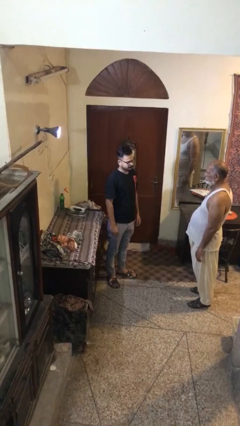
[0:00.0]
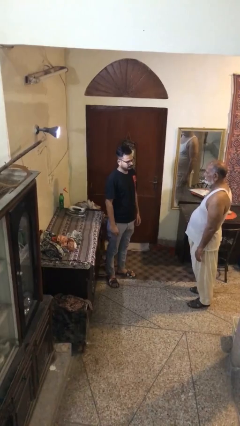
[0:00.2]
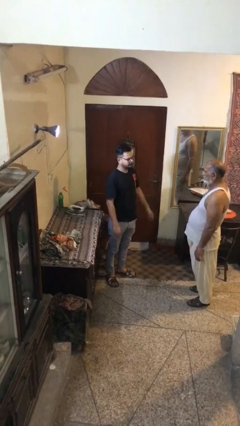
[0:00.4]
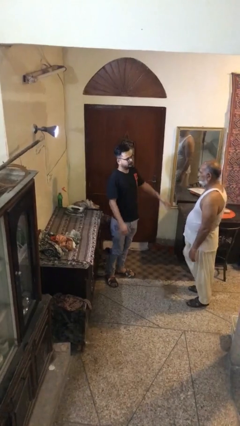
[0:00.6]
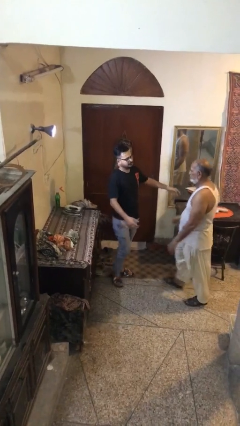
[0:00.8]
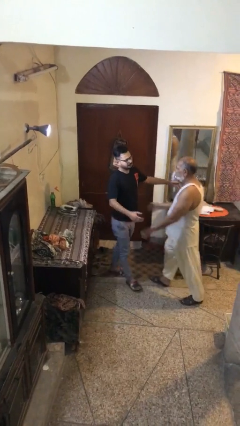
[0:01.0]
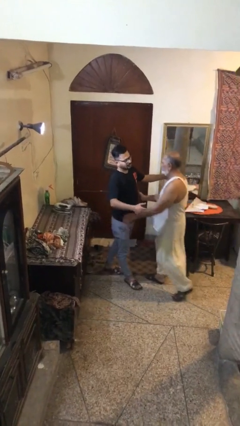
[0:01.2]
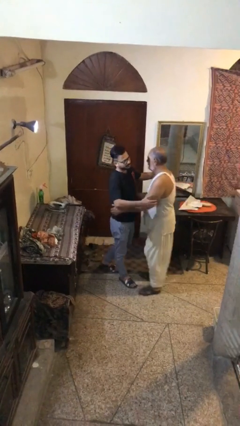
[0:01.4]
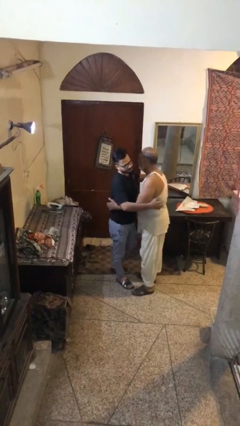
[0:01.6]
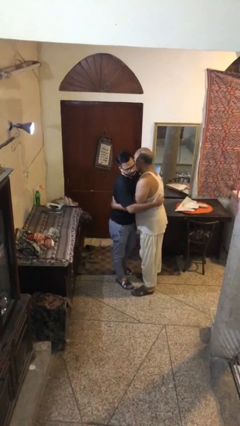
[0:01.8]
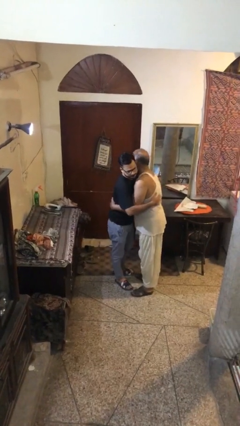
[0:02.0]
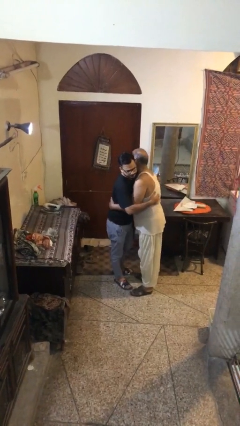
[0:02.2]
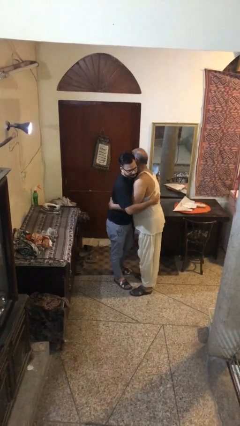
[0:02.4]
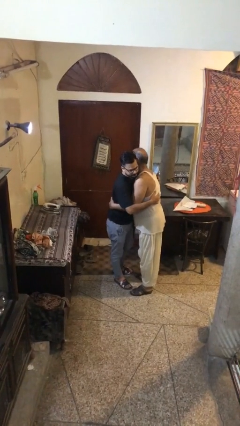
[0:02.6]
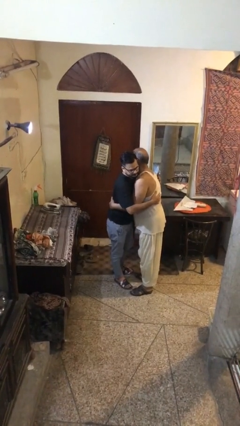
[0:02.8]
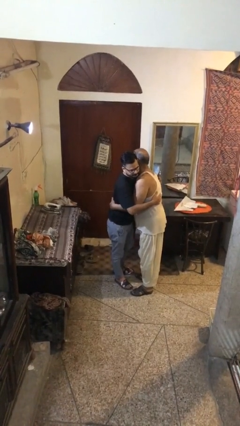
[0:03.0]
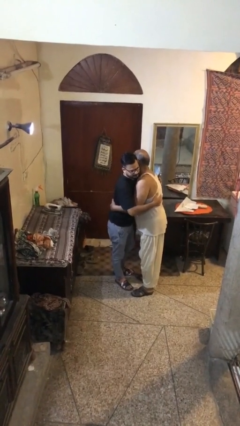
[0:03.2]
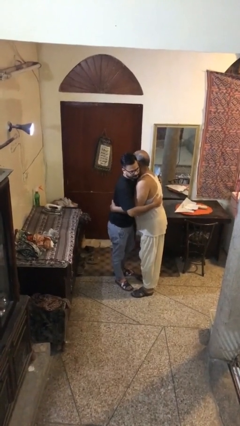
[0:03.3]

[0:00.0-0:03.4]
person embraces person

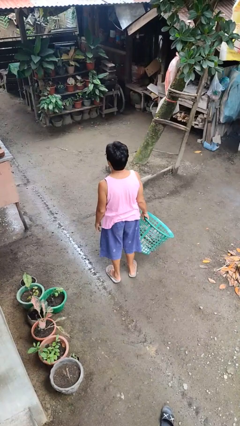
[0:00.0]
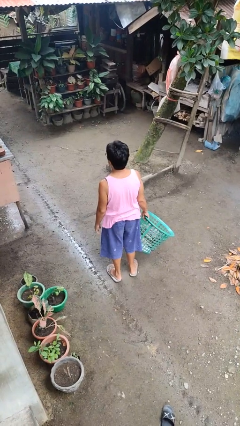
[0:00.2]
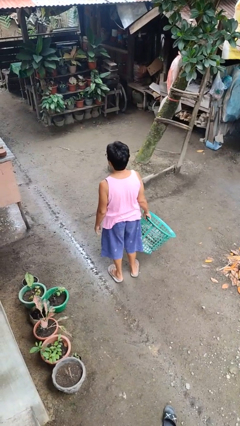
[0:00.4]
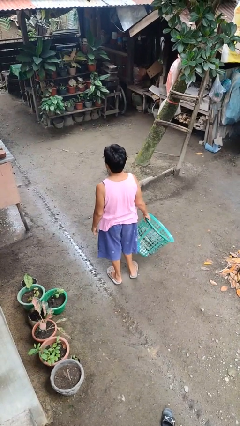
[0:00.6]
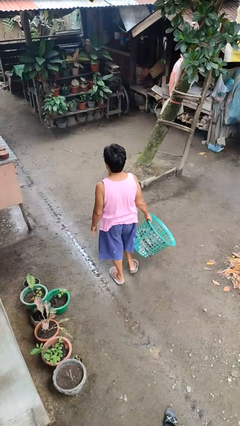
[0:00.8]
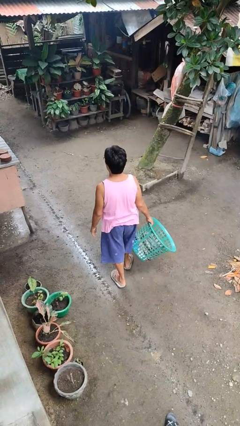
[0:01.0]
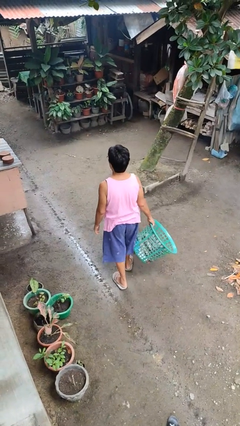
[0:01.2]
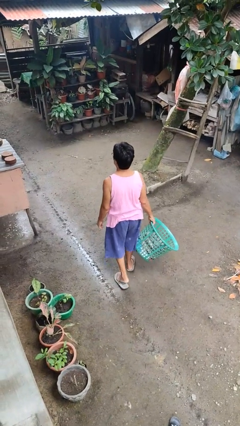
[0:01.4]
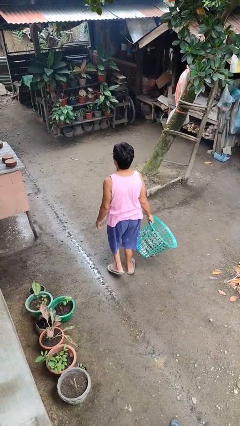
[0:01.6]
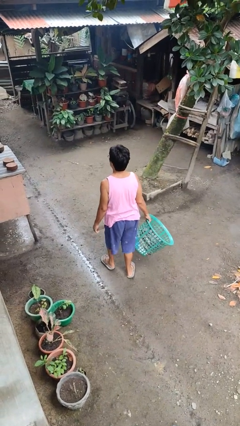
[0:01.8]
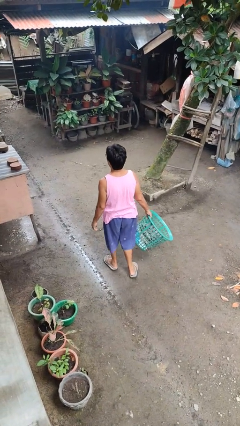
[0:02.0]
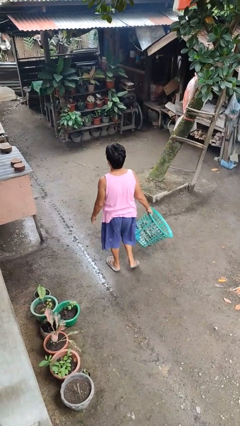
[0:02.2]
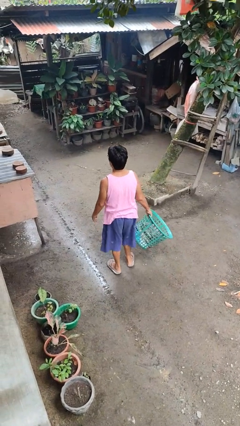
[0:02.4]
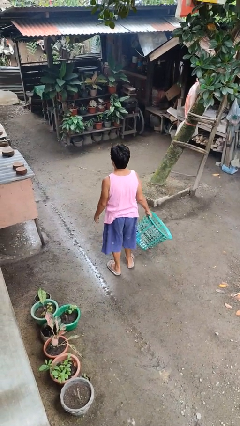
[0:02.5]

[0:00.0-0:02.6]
person carries laundry basket

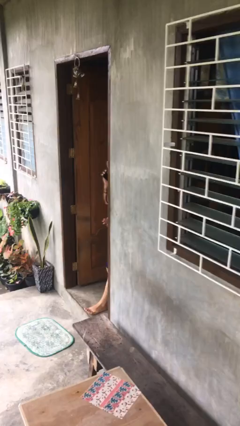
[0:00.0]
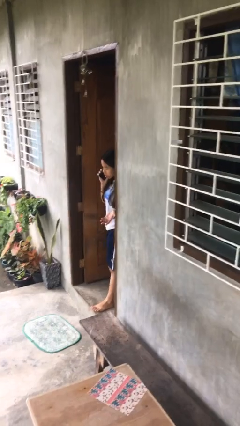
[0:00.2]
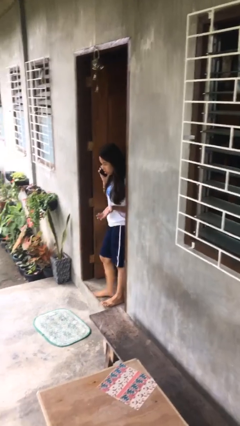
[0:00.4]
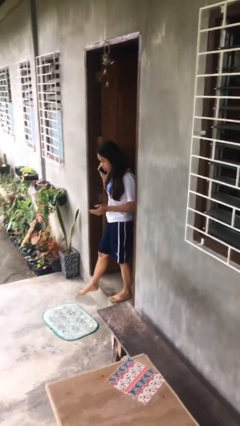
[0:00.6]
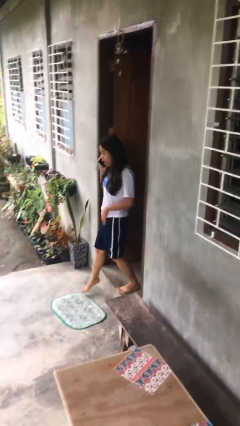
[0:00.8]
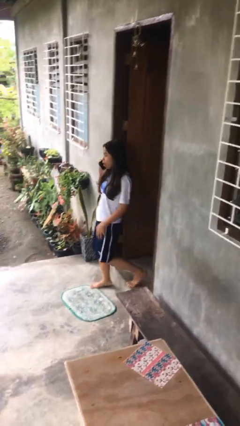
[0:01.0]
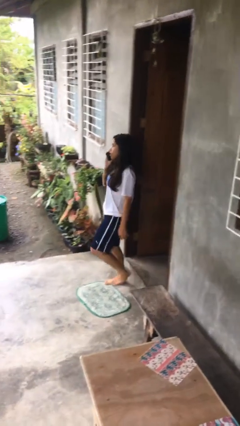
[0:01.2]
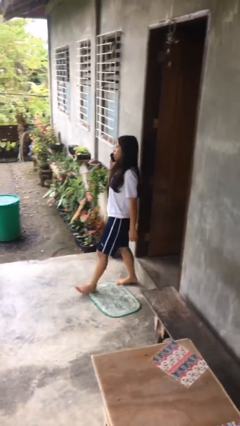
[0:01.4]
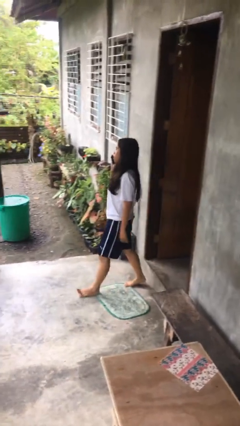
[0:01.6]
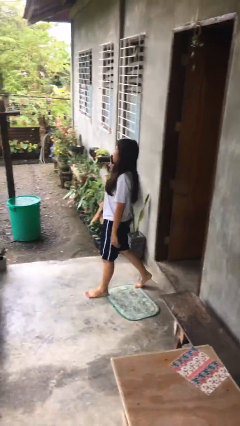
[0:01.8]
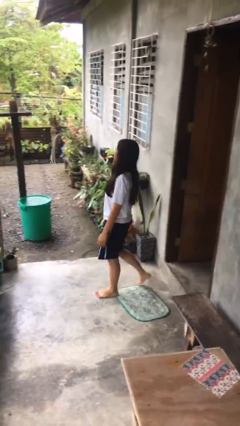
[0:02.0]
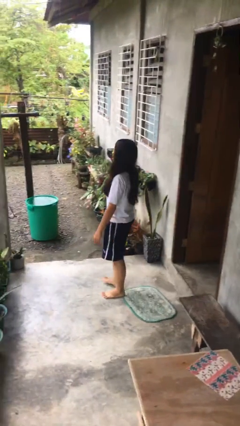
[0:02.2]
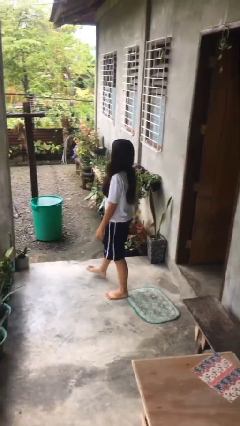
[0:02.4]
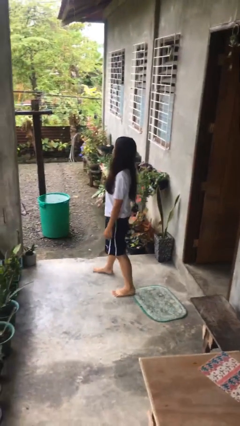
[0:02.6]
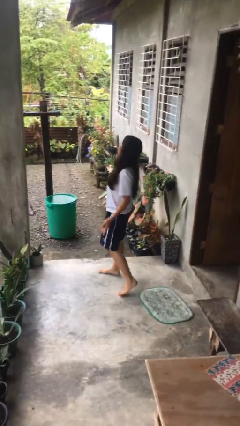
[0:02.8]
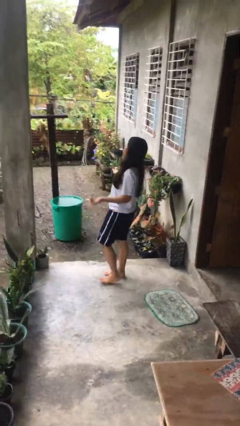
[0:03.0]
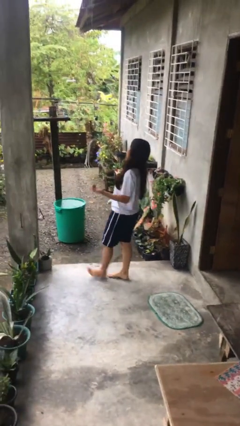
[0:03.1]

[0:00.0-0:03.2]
person enters scene through structure

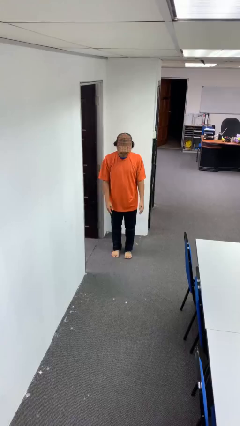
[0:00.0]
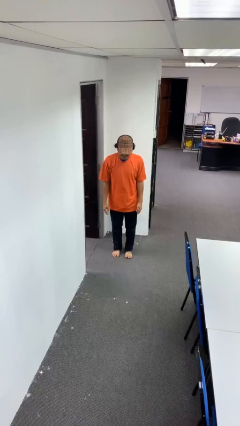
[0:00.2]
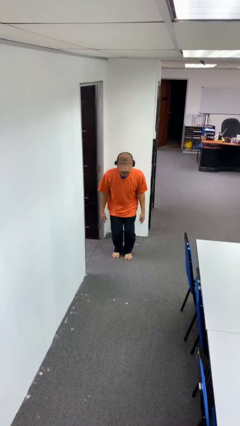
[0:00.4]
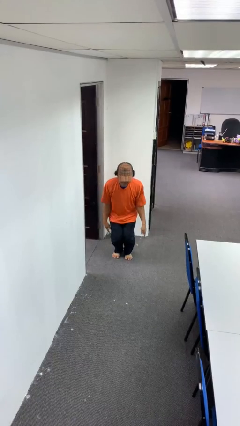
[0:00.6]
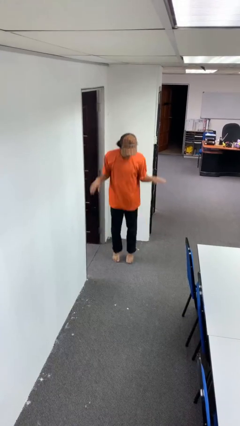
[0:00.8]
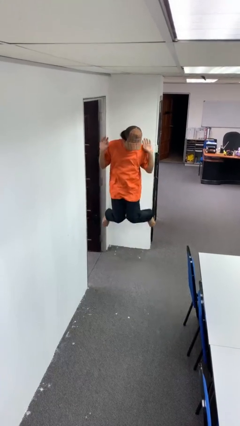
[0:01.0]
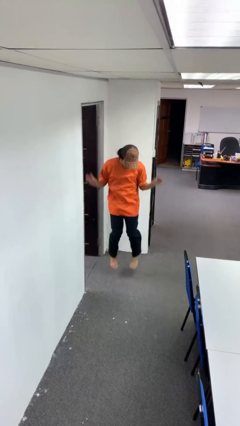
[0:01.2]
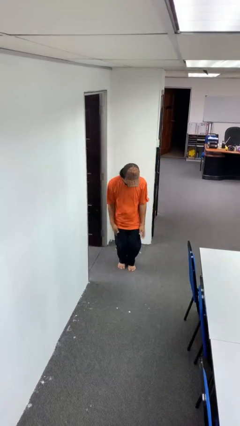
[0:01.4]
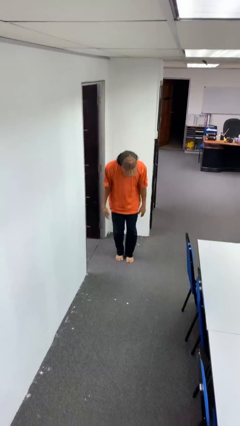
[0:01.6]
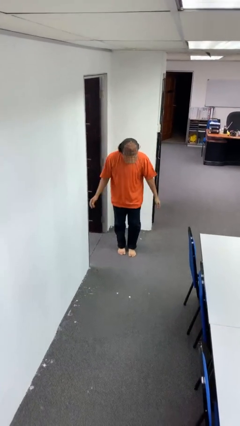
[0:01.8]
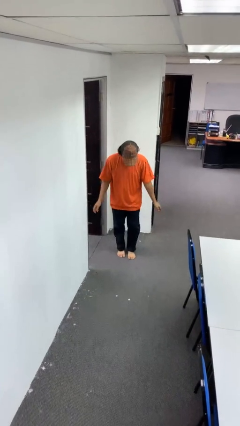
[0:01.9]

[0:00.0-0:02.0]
person jumps

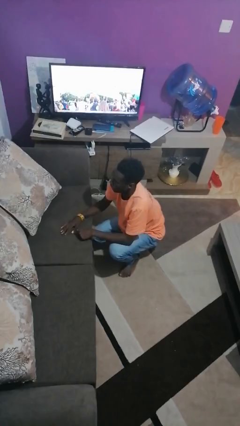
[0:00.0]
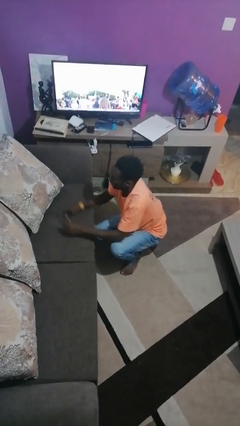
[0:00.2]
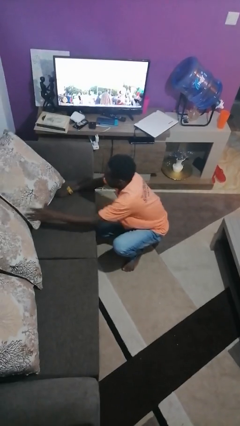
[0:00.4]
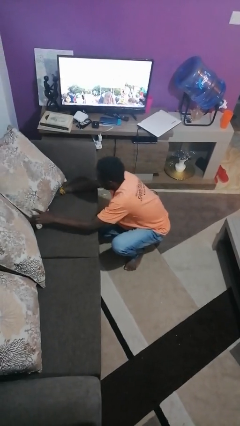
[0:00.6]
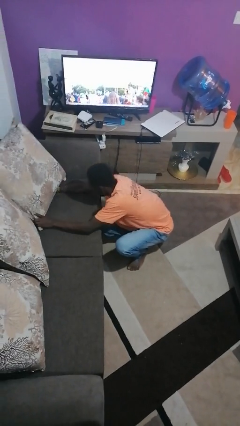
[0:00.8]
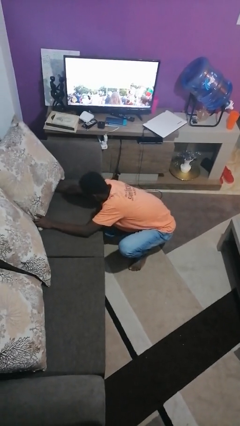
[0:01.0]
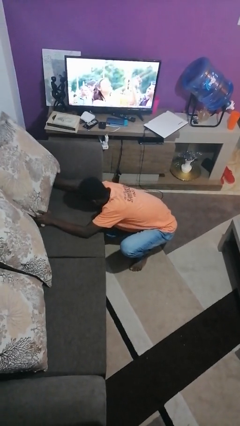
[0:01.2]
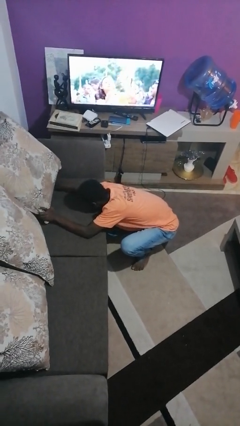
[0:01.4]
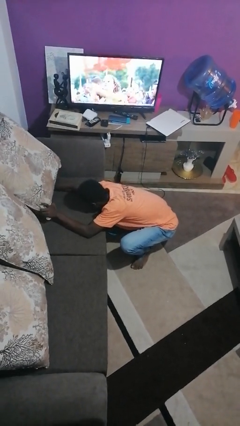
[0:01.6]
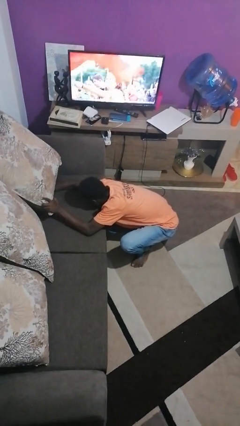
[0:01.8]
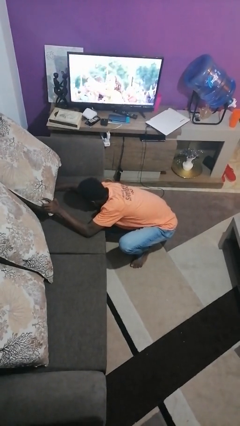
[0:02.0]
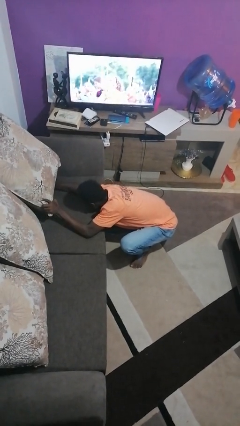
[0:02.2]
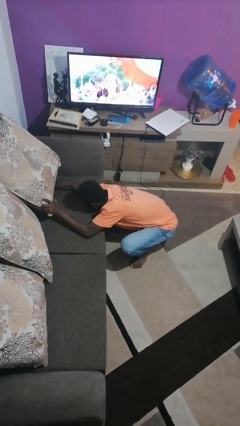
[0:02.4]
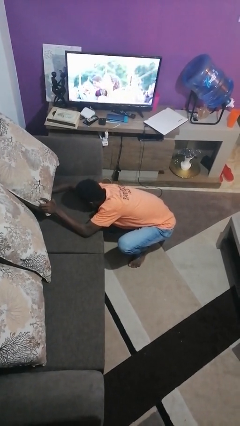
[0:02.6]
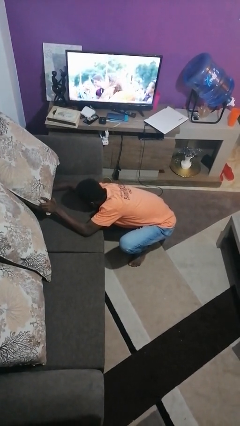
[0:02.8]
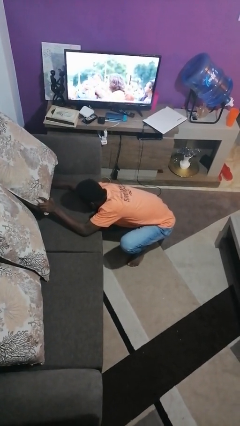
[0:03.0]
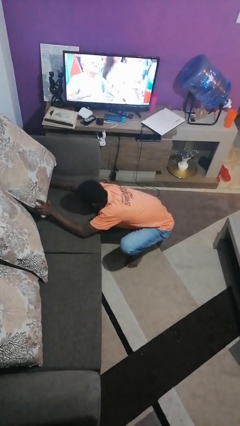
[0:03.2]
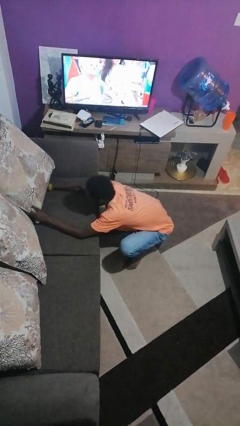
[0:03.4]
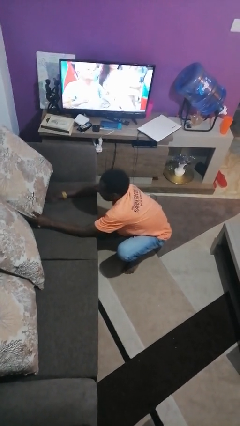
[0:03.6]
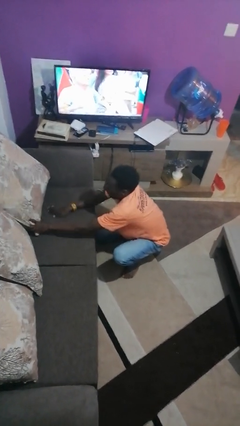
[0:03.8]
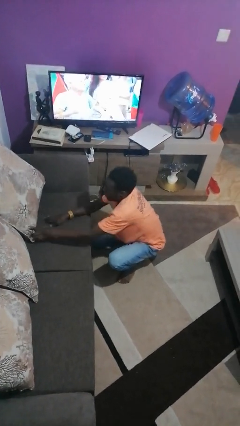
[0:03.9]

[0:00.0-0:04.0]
person searches in couch

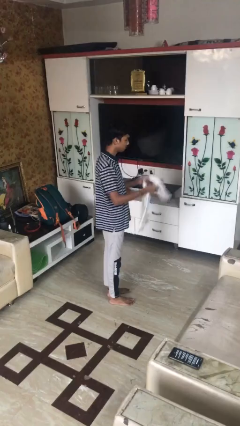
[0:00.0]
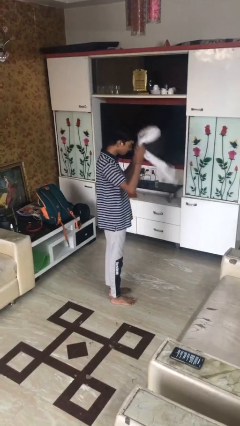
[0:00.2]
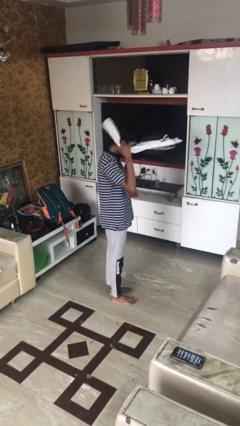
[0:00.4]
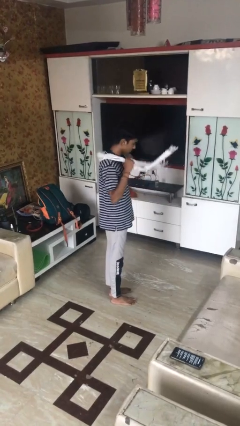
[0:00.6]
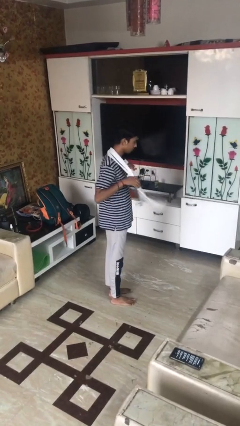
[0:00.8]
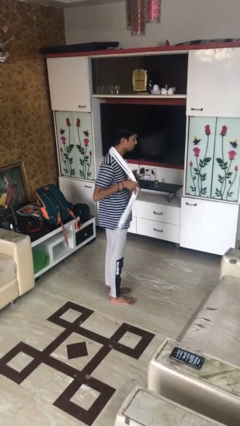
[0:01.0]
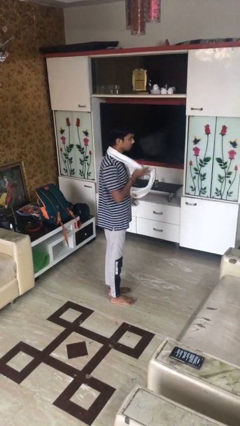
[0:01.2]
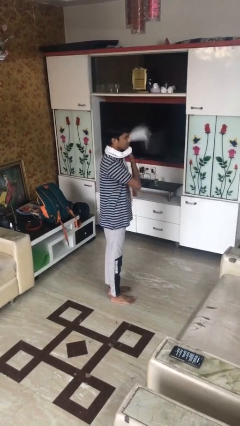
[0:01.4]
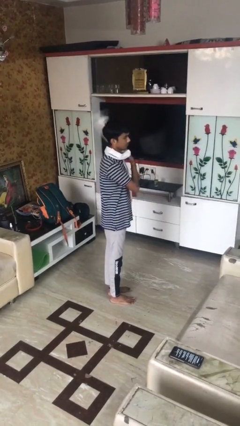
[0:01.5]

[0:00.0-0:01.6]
person puts on scarf

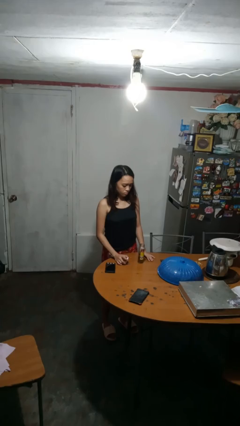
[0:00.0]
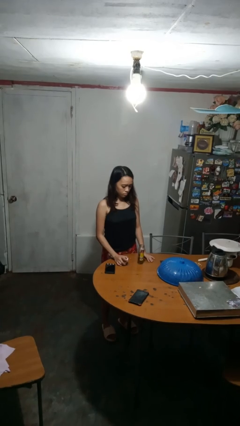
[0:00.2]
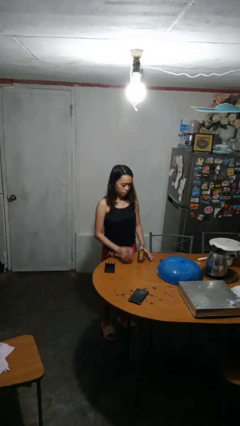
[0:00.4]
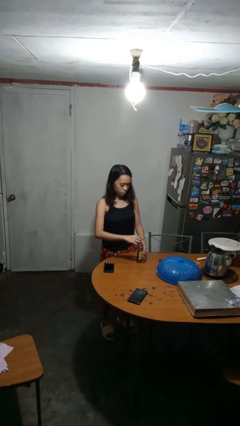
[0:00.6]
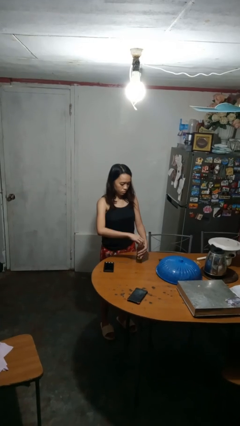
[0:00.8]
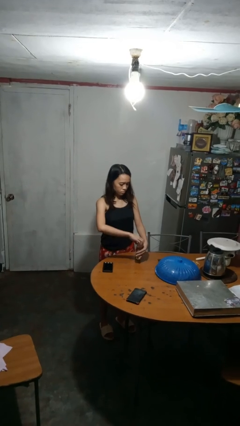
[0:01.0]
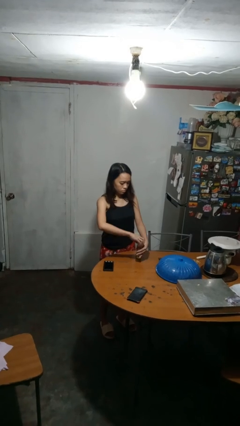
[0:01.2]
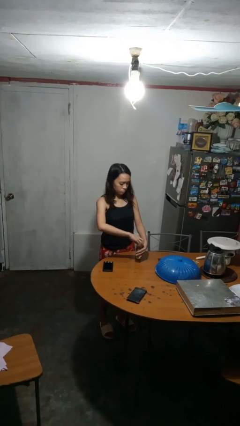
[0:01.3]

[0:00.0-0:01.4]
person closes jar
